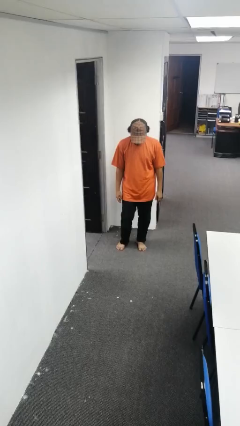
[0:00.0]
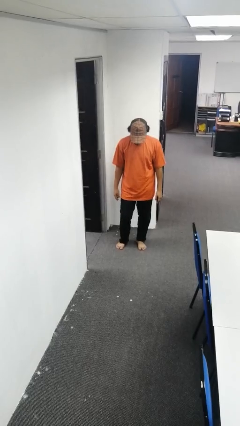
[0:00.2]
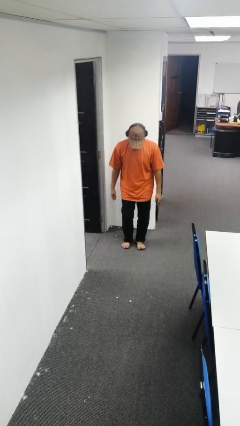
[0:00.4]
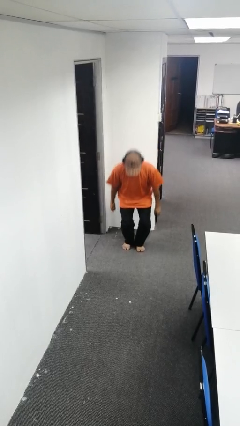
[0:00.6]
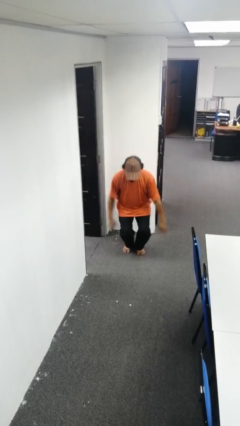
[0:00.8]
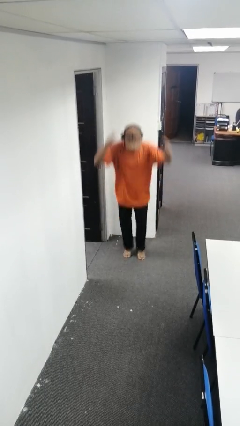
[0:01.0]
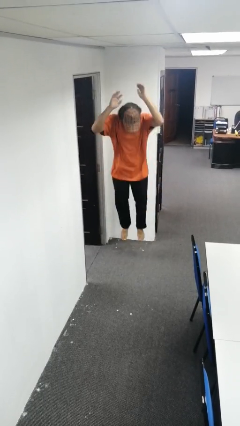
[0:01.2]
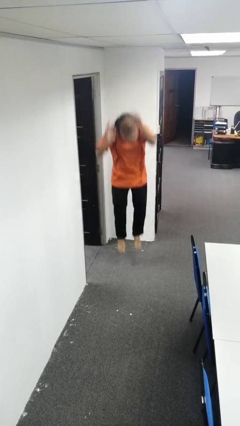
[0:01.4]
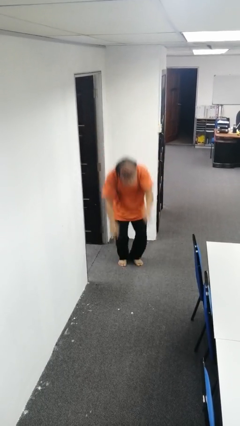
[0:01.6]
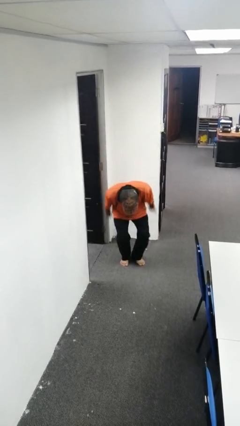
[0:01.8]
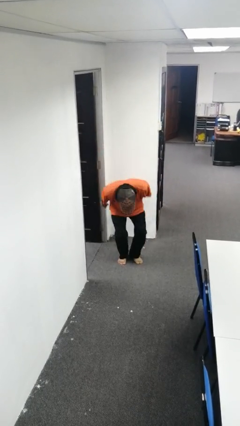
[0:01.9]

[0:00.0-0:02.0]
person jumps

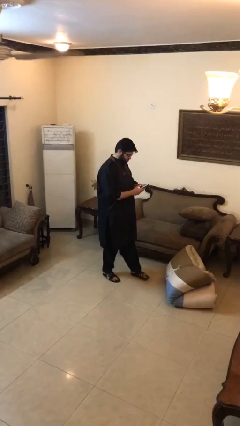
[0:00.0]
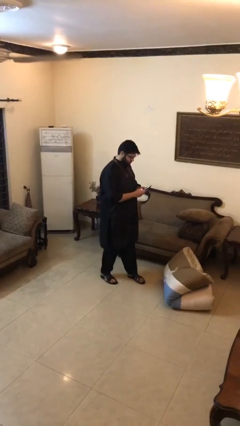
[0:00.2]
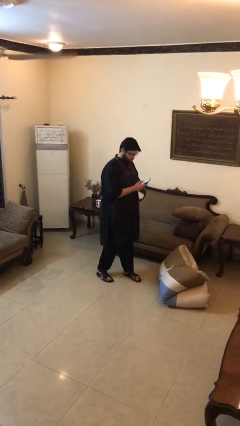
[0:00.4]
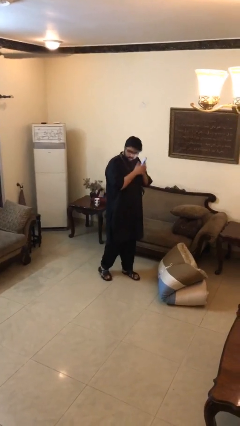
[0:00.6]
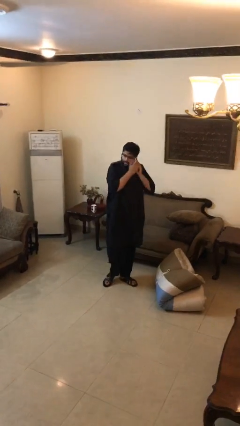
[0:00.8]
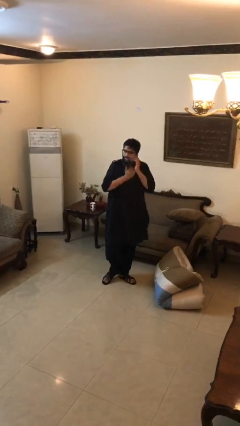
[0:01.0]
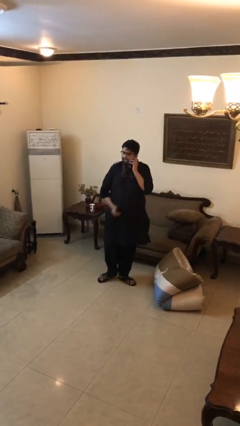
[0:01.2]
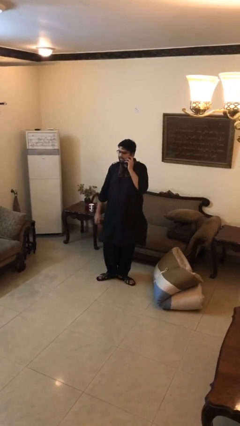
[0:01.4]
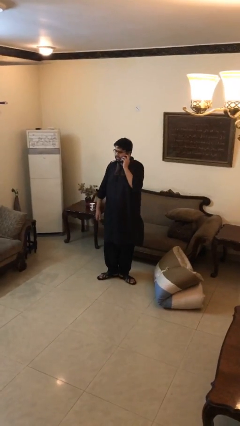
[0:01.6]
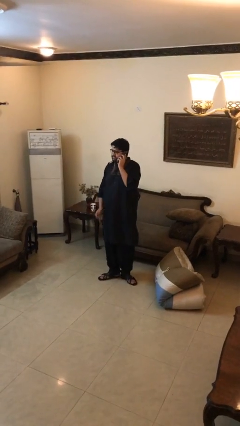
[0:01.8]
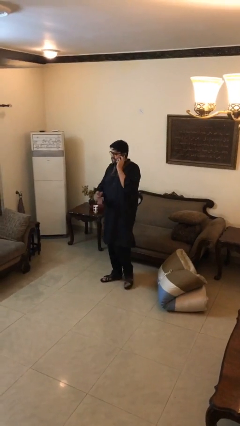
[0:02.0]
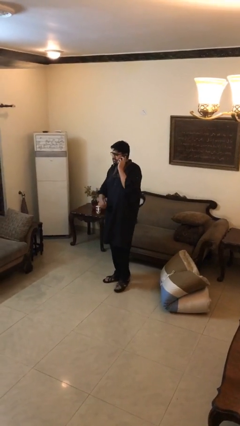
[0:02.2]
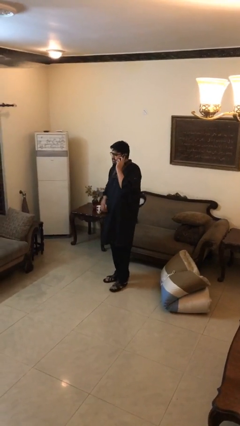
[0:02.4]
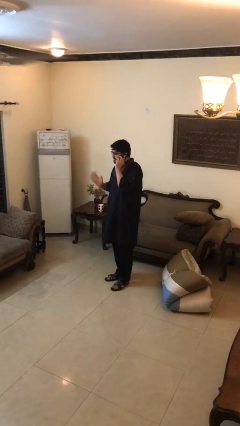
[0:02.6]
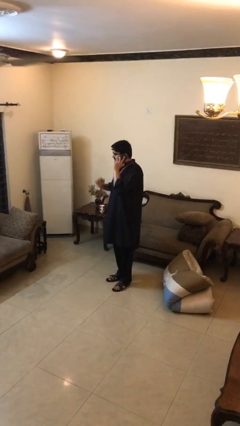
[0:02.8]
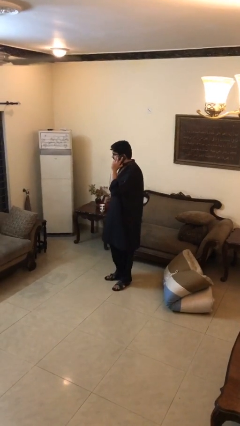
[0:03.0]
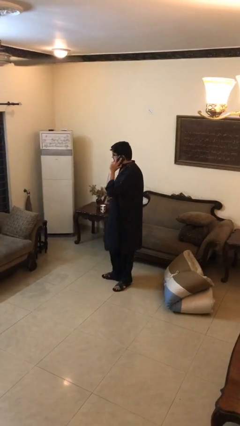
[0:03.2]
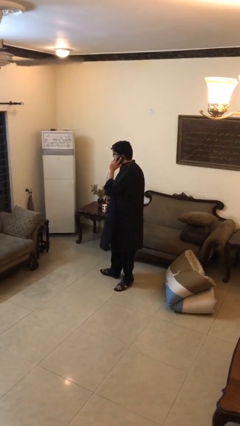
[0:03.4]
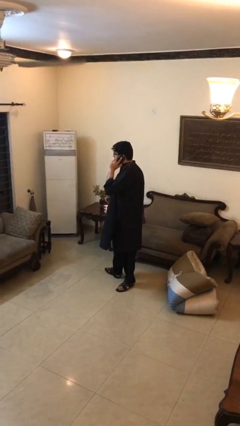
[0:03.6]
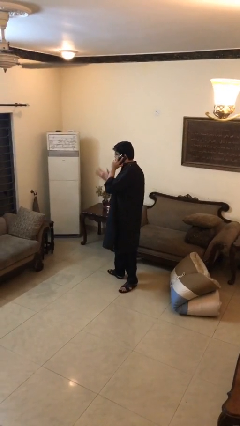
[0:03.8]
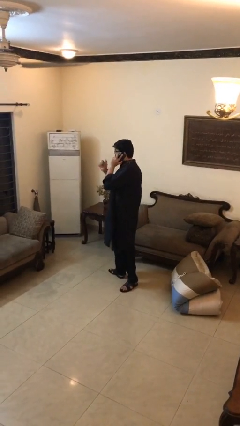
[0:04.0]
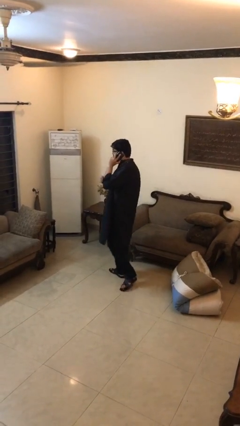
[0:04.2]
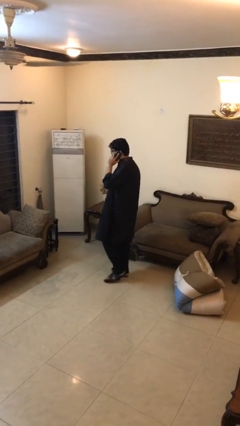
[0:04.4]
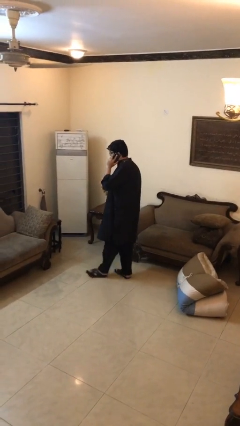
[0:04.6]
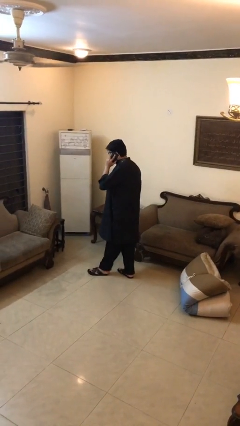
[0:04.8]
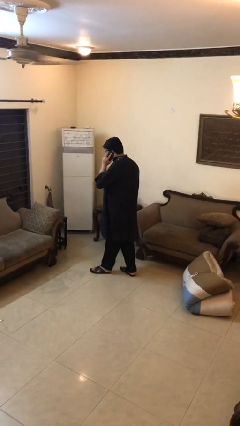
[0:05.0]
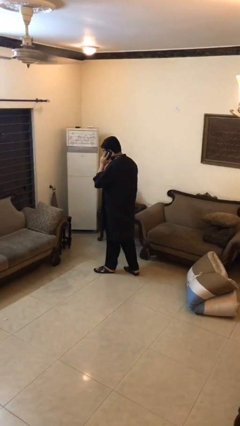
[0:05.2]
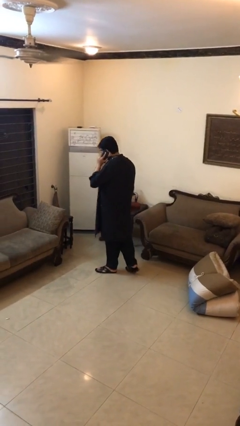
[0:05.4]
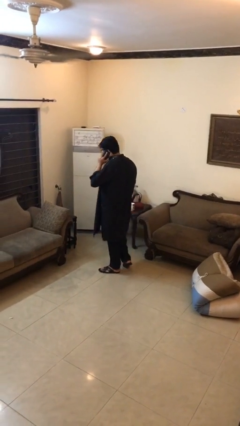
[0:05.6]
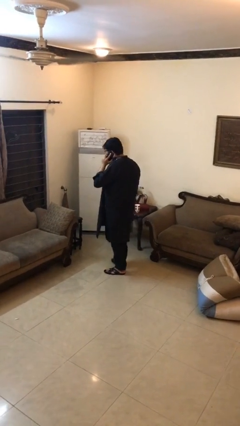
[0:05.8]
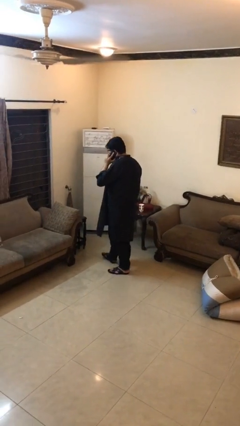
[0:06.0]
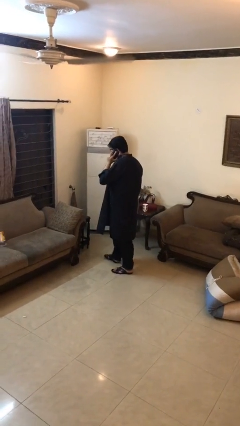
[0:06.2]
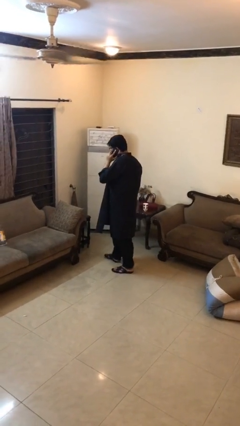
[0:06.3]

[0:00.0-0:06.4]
person talks on phone

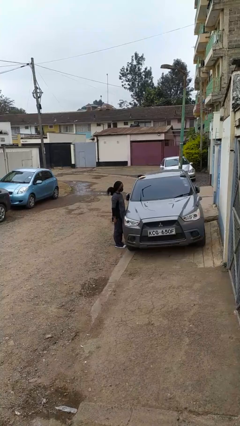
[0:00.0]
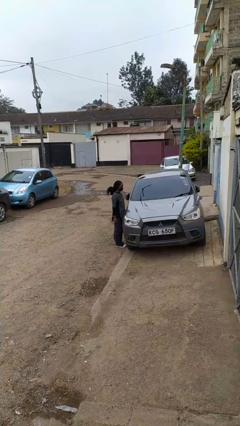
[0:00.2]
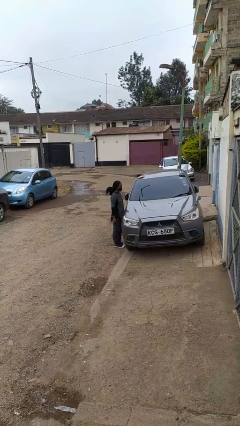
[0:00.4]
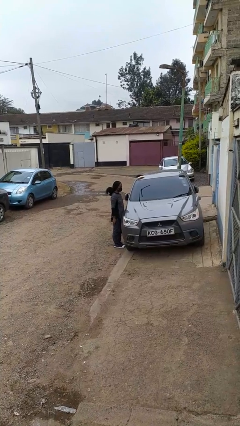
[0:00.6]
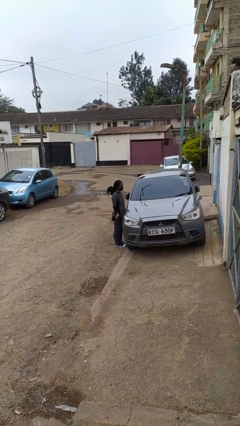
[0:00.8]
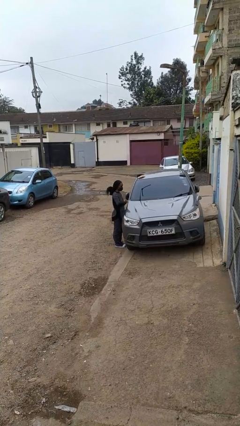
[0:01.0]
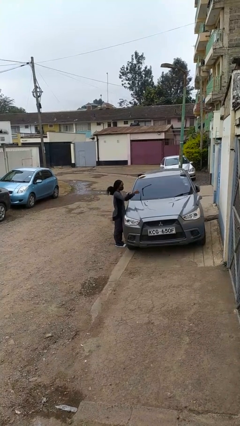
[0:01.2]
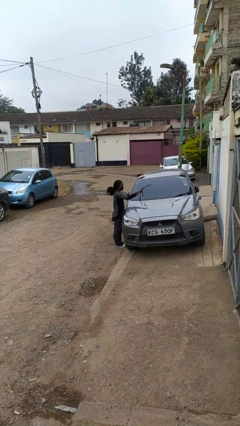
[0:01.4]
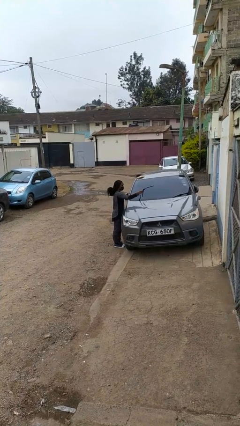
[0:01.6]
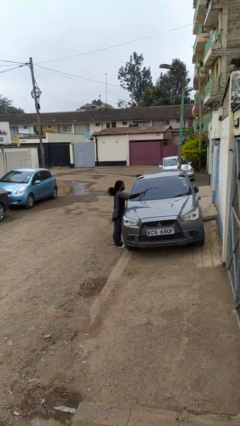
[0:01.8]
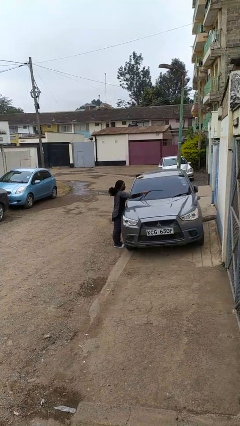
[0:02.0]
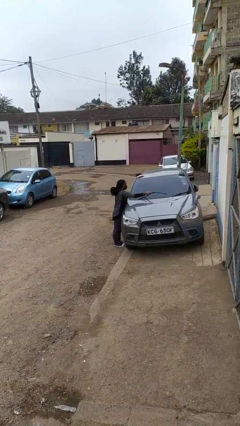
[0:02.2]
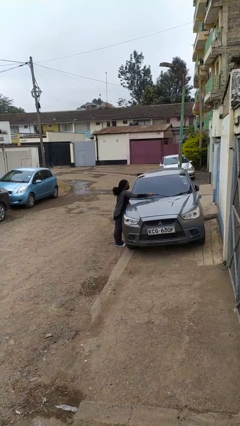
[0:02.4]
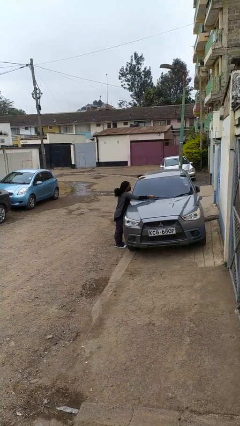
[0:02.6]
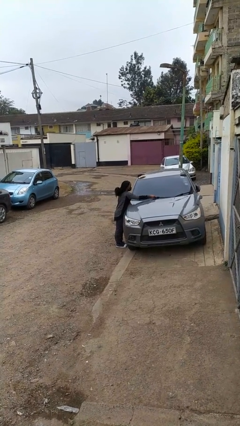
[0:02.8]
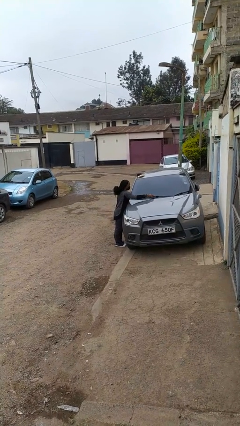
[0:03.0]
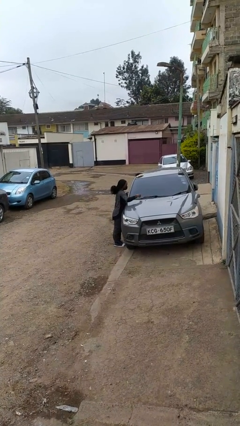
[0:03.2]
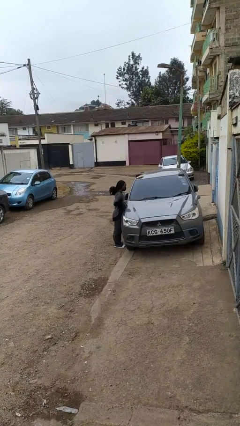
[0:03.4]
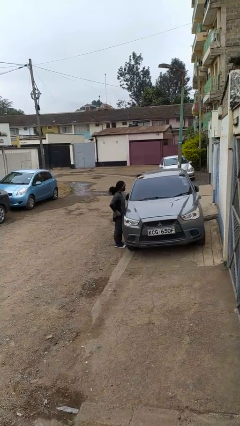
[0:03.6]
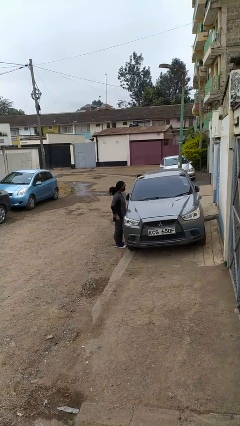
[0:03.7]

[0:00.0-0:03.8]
person puts down object on couch

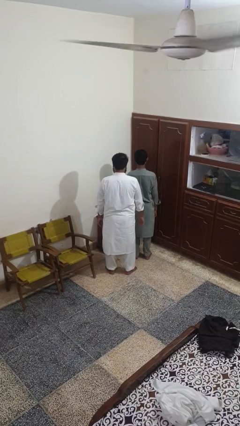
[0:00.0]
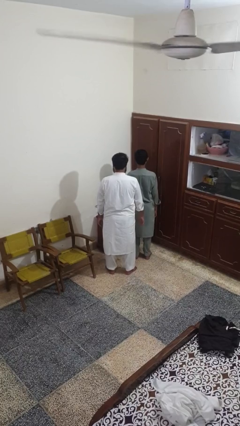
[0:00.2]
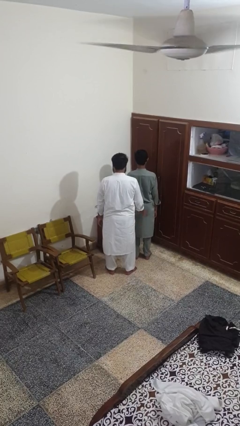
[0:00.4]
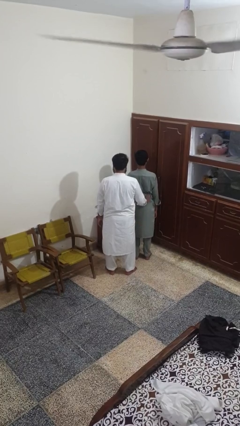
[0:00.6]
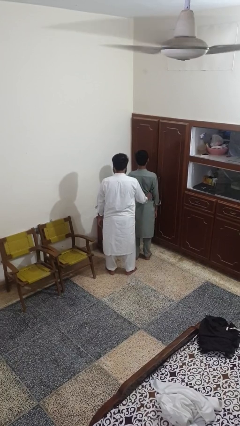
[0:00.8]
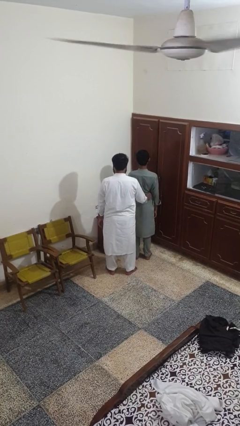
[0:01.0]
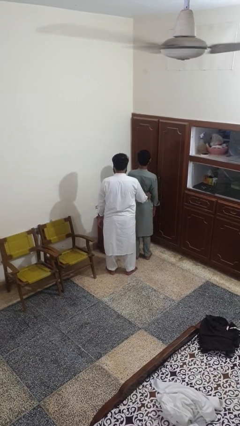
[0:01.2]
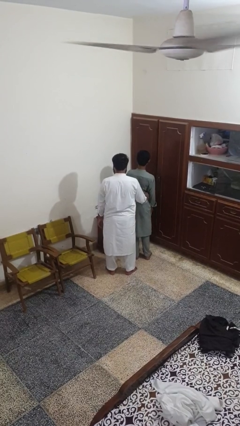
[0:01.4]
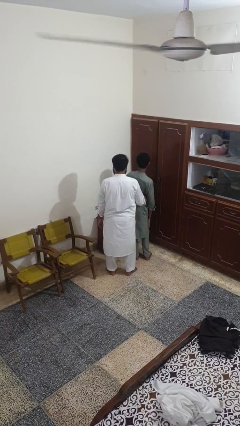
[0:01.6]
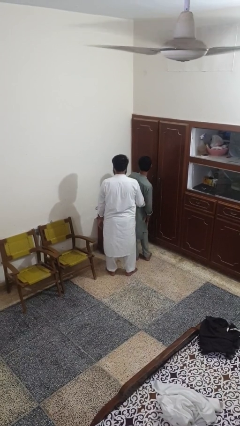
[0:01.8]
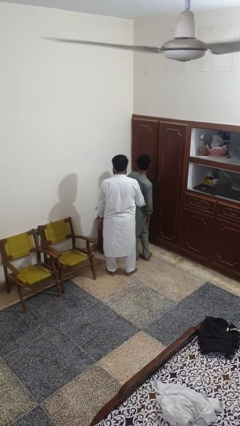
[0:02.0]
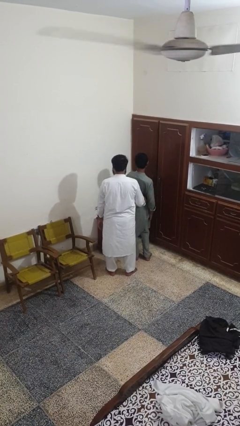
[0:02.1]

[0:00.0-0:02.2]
person tickles person

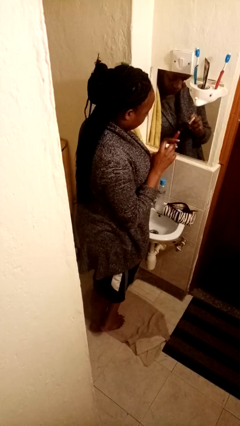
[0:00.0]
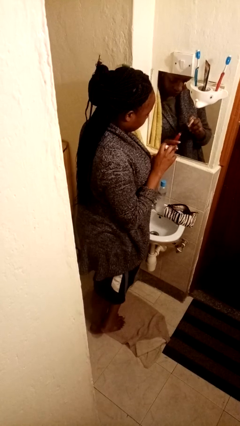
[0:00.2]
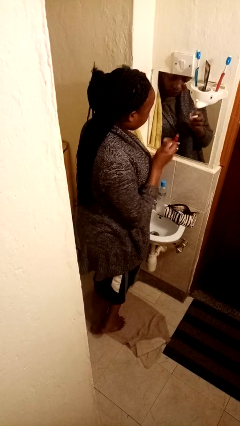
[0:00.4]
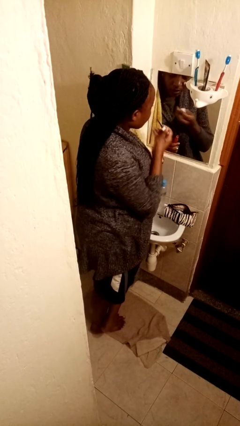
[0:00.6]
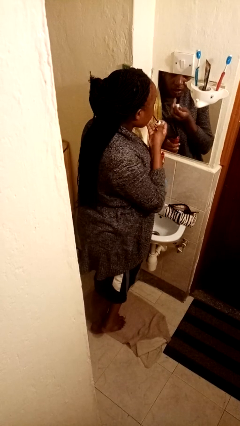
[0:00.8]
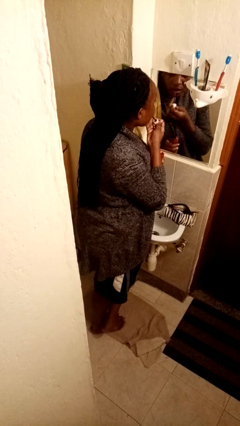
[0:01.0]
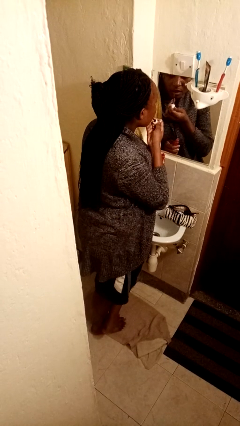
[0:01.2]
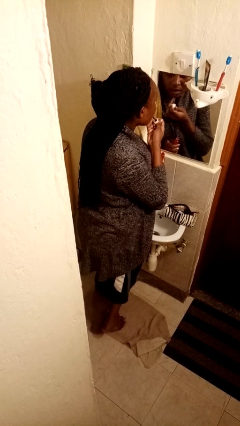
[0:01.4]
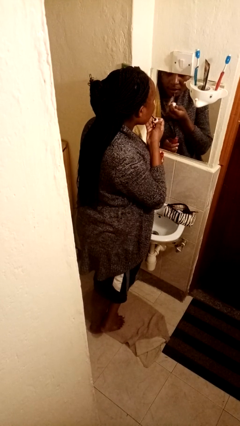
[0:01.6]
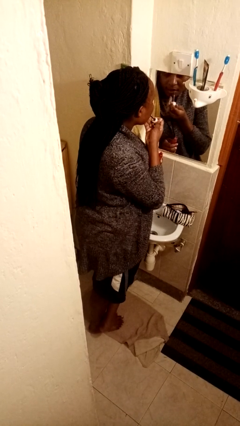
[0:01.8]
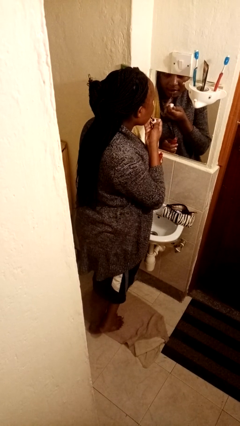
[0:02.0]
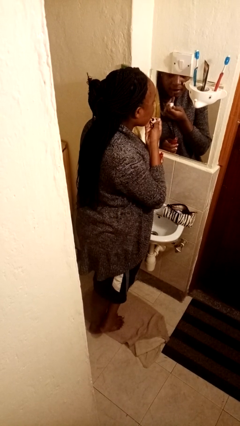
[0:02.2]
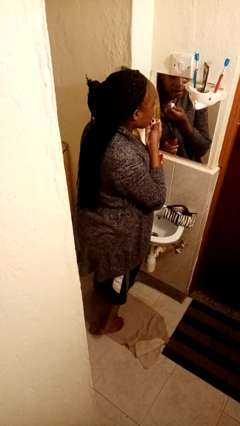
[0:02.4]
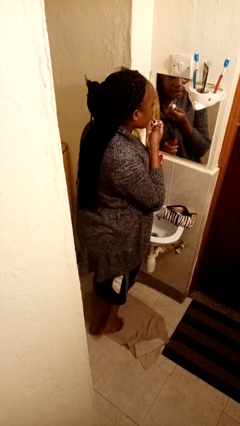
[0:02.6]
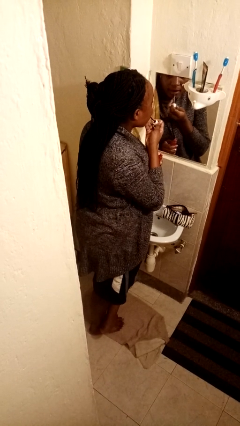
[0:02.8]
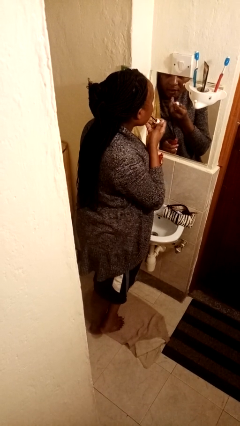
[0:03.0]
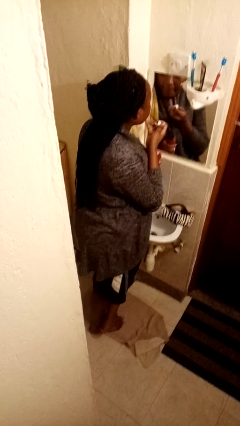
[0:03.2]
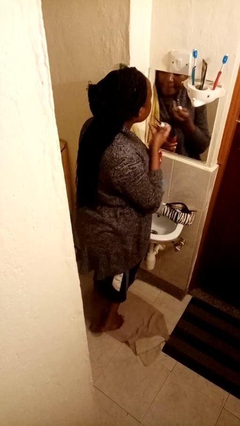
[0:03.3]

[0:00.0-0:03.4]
person applies lip makeup

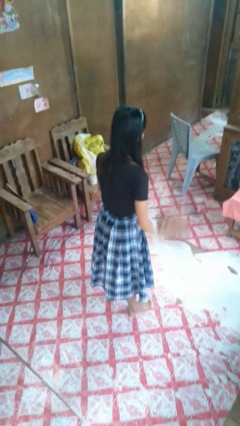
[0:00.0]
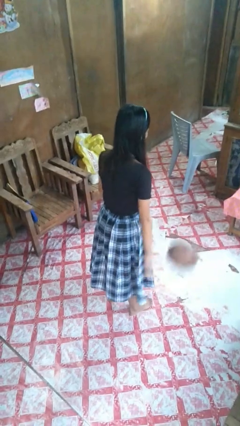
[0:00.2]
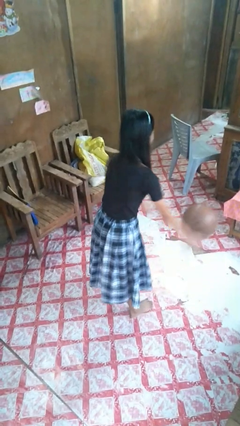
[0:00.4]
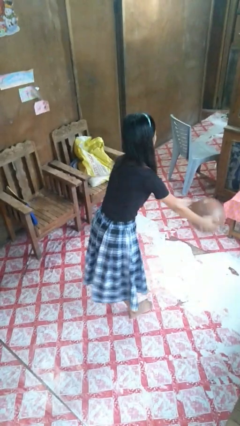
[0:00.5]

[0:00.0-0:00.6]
person bounces ball on floor
